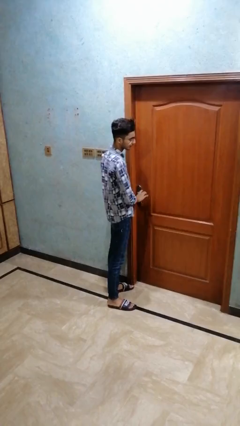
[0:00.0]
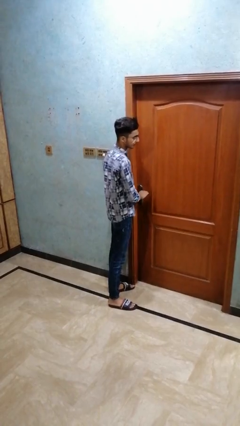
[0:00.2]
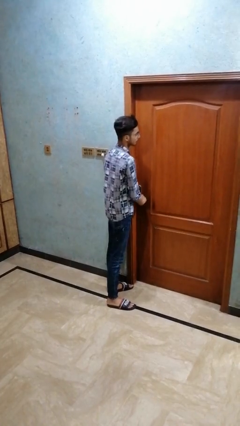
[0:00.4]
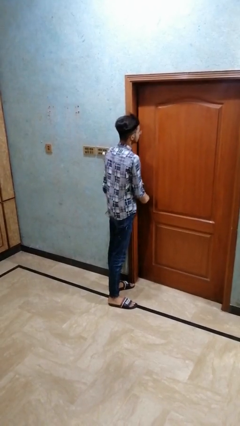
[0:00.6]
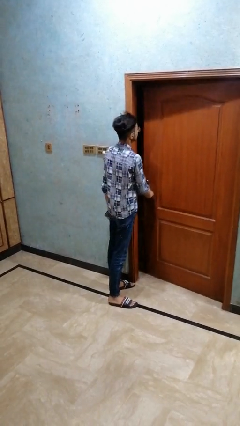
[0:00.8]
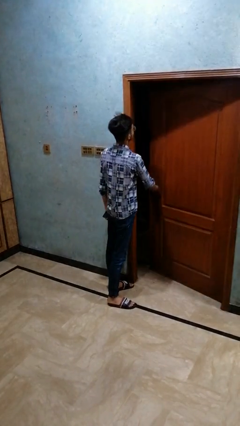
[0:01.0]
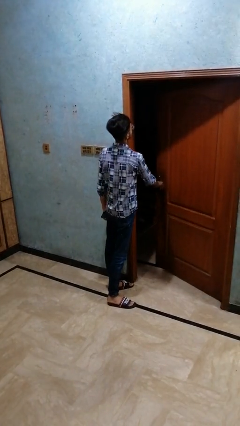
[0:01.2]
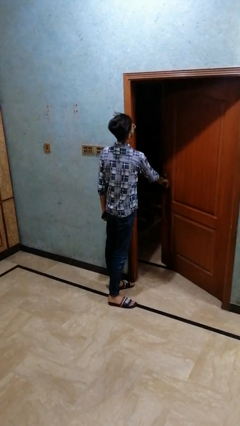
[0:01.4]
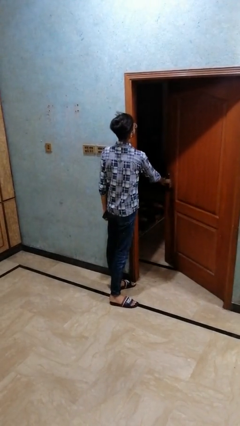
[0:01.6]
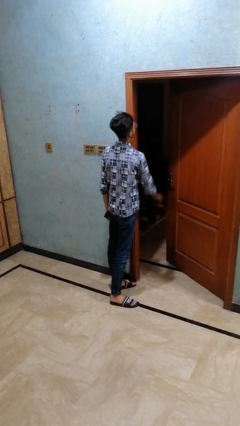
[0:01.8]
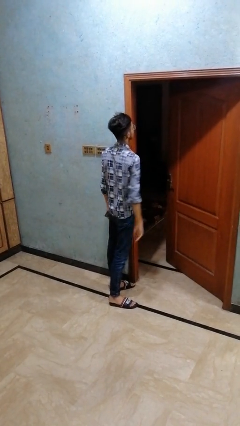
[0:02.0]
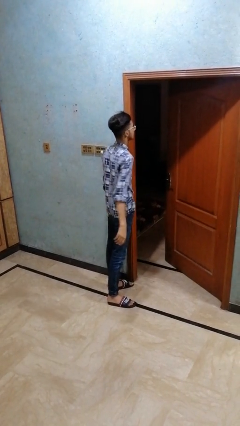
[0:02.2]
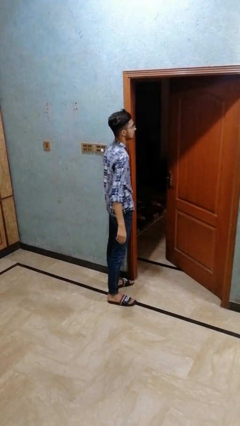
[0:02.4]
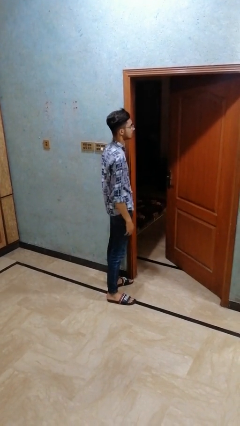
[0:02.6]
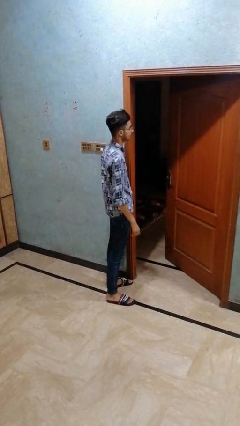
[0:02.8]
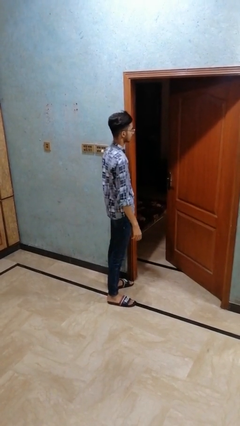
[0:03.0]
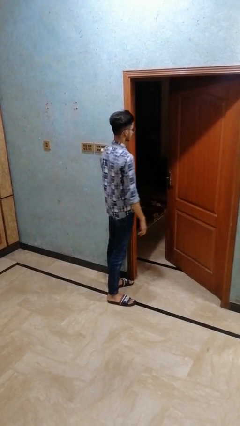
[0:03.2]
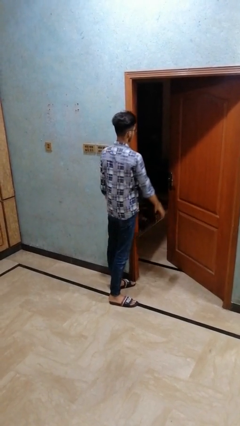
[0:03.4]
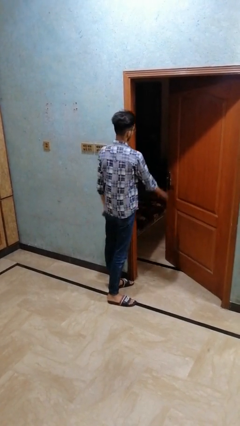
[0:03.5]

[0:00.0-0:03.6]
person opens closet door

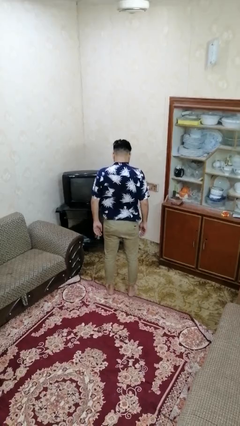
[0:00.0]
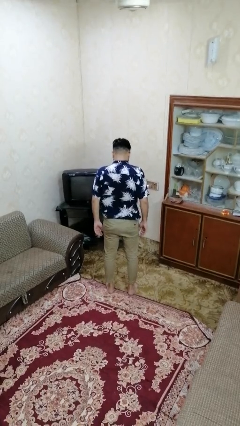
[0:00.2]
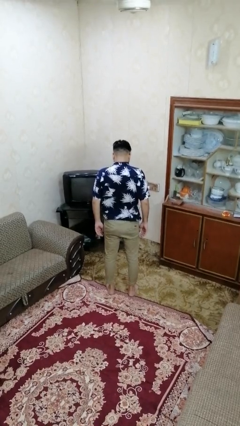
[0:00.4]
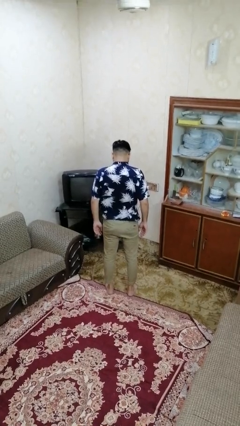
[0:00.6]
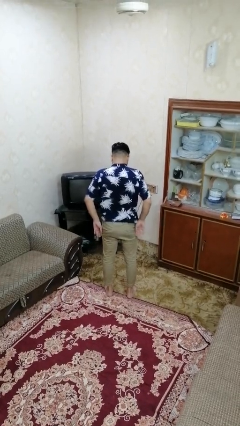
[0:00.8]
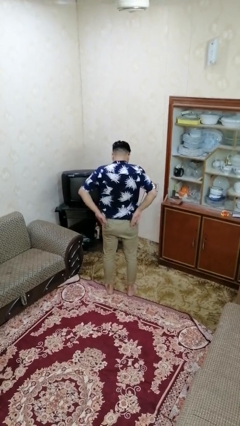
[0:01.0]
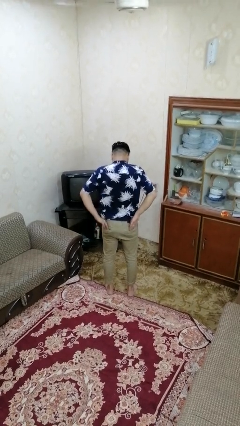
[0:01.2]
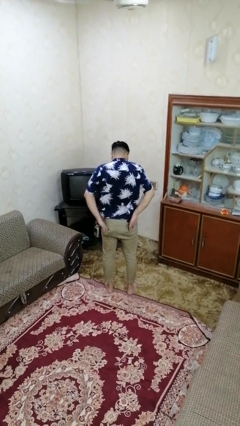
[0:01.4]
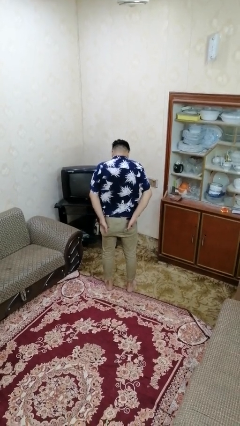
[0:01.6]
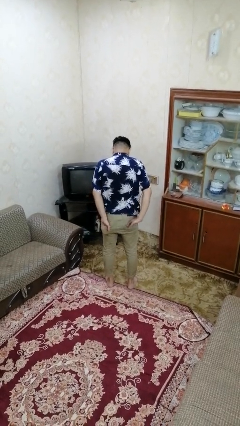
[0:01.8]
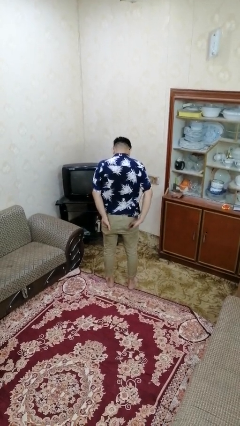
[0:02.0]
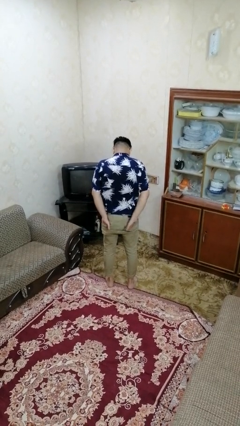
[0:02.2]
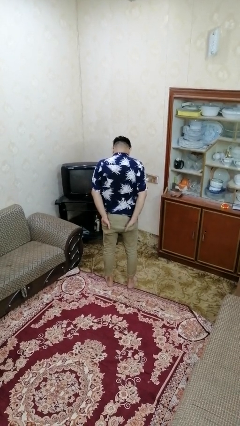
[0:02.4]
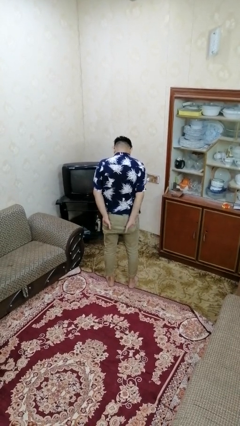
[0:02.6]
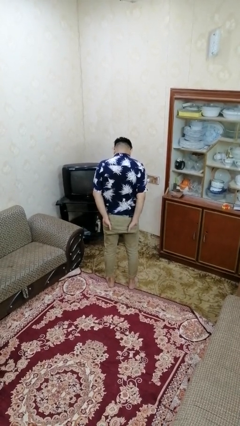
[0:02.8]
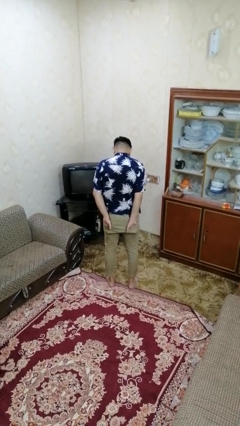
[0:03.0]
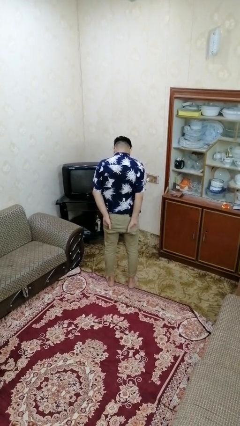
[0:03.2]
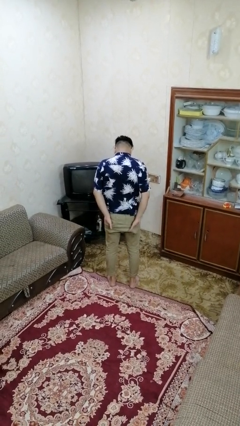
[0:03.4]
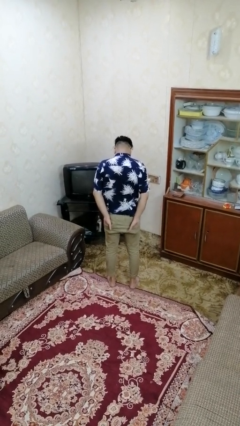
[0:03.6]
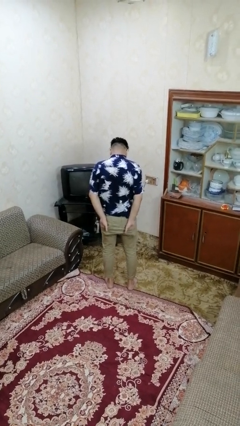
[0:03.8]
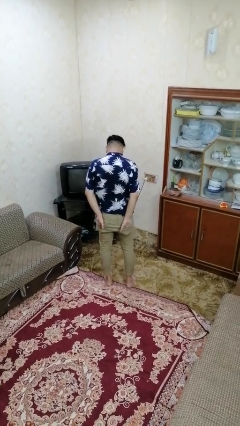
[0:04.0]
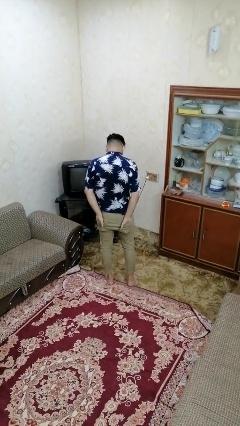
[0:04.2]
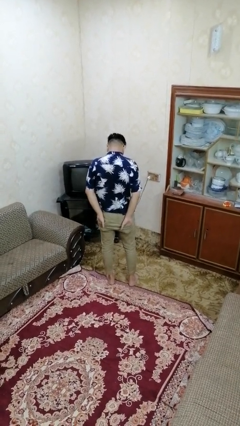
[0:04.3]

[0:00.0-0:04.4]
person puts hands in back pockets

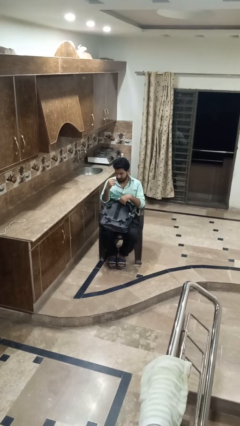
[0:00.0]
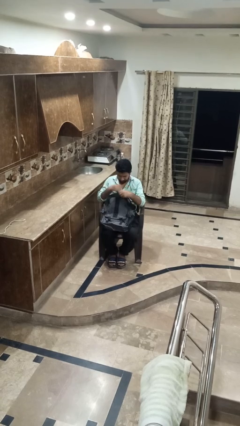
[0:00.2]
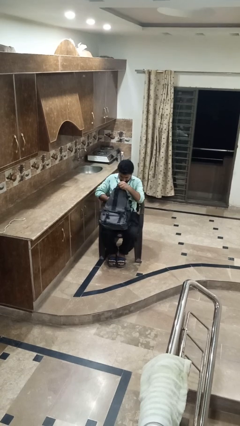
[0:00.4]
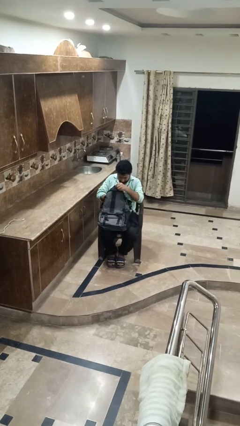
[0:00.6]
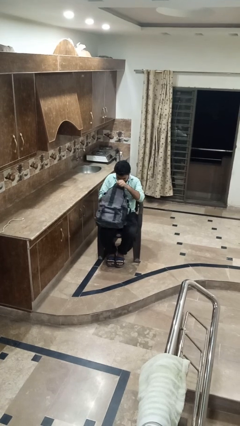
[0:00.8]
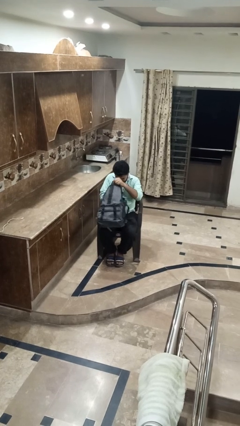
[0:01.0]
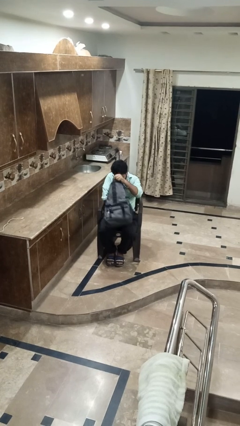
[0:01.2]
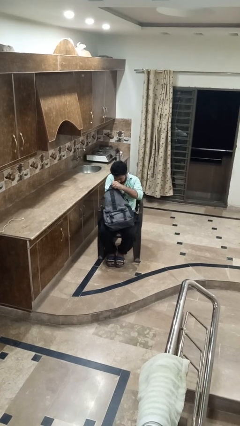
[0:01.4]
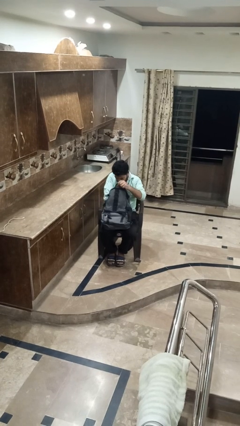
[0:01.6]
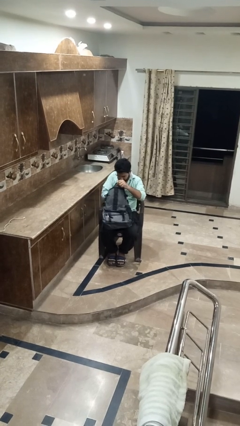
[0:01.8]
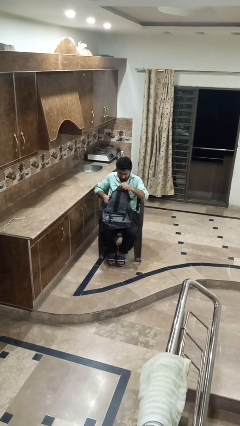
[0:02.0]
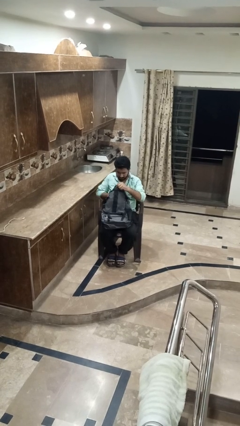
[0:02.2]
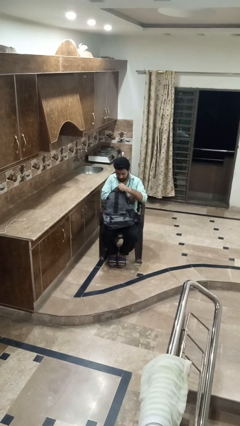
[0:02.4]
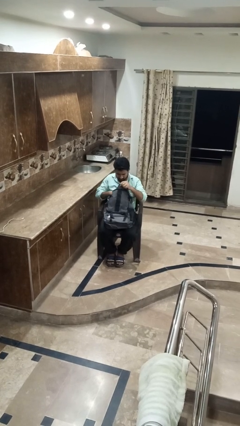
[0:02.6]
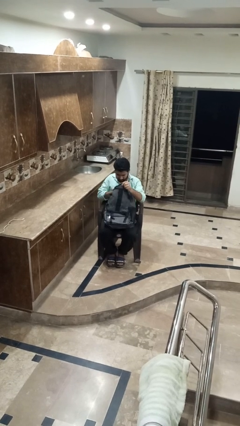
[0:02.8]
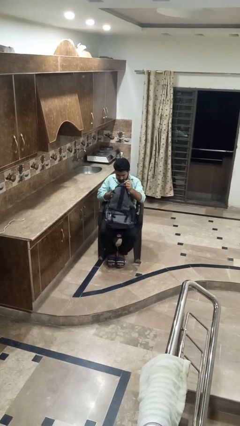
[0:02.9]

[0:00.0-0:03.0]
person searches in bag

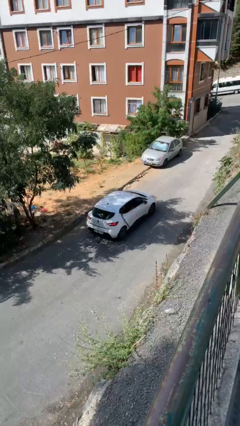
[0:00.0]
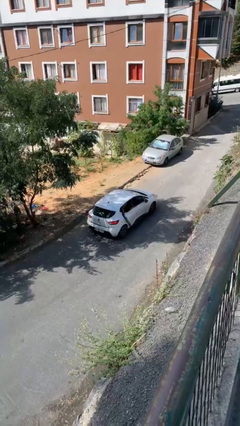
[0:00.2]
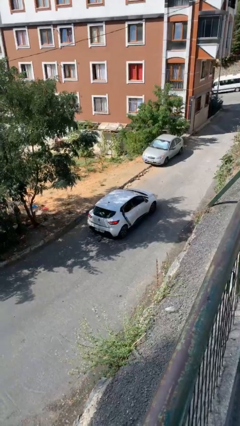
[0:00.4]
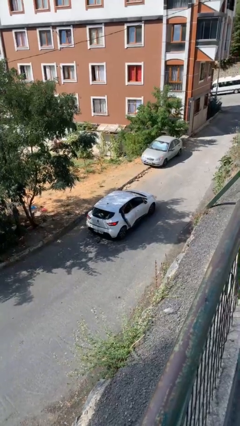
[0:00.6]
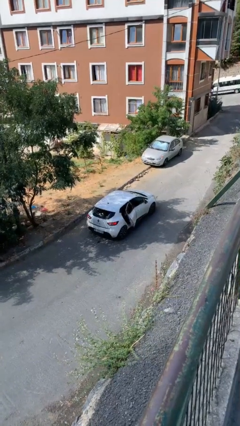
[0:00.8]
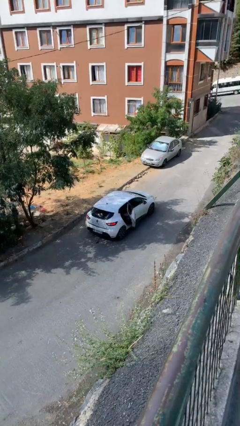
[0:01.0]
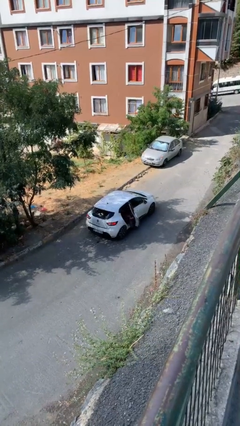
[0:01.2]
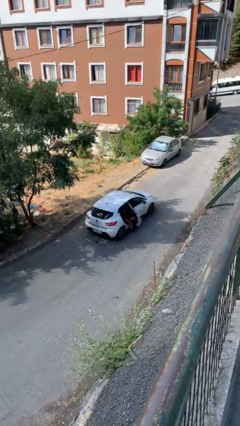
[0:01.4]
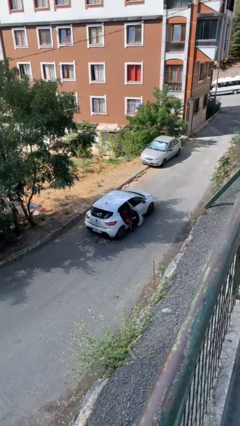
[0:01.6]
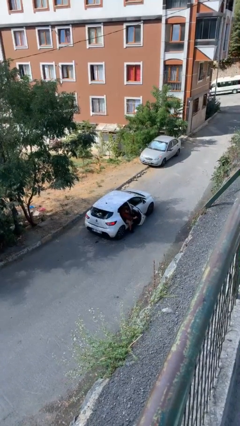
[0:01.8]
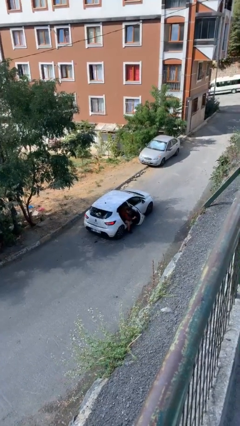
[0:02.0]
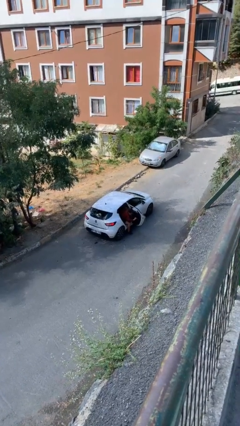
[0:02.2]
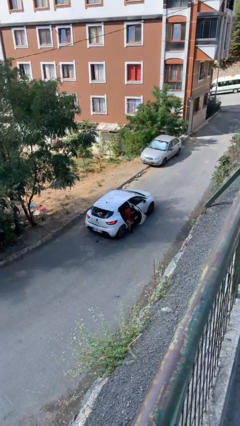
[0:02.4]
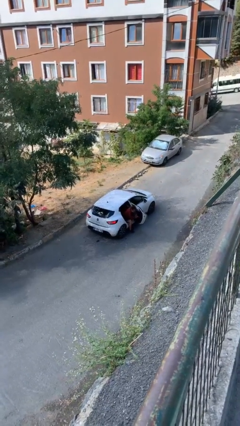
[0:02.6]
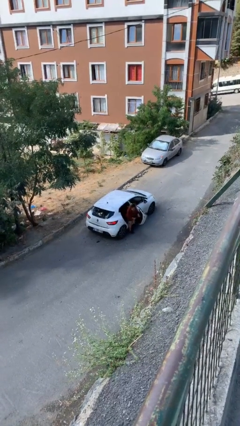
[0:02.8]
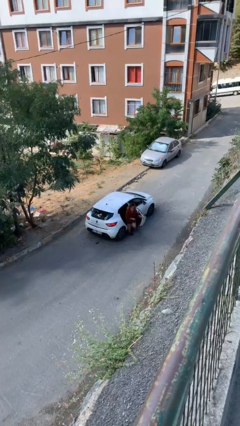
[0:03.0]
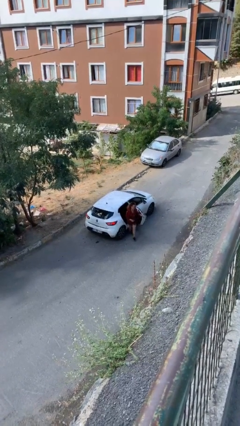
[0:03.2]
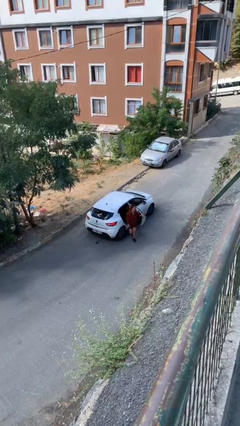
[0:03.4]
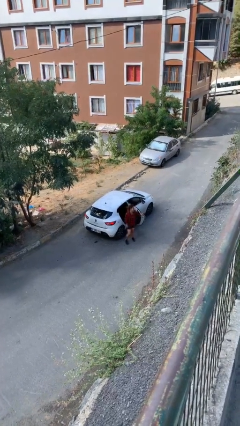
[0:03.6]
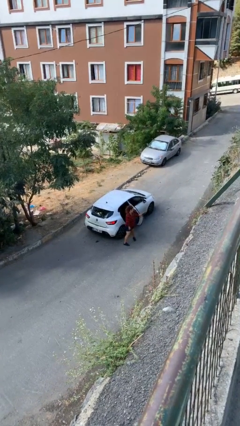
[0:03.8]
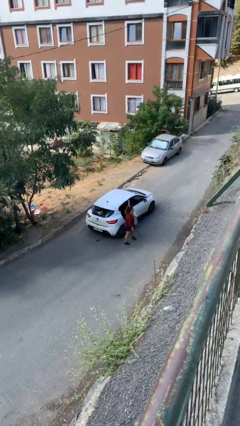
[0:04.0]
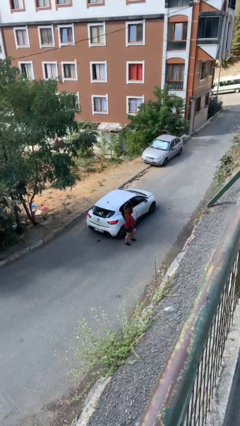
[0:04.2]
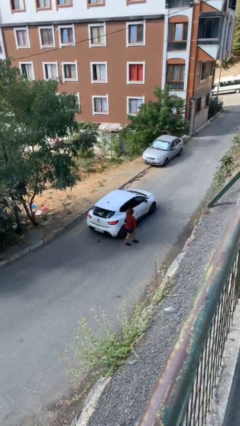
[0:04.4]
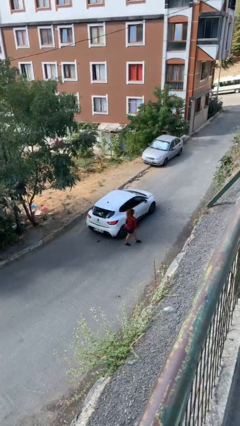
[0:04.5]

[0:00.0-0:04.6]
car drops off person

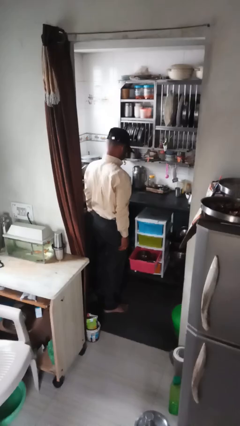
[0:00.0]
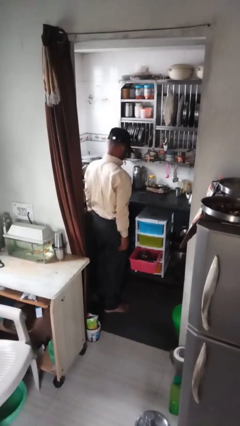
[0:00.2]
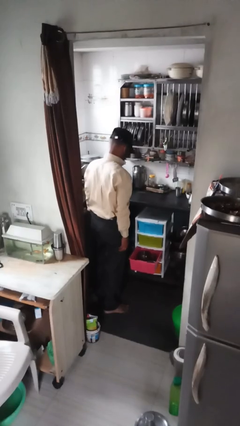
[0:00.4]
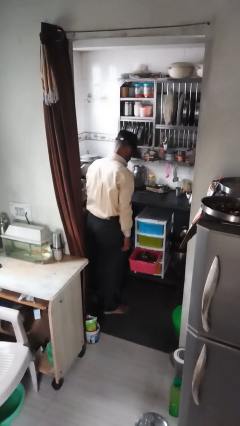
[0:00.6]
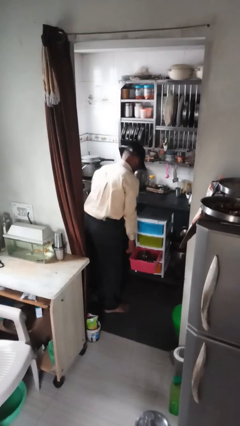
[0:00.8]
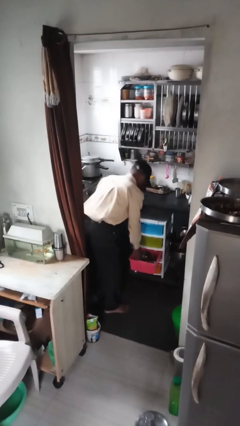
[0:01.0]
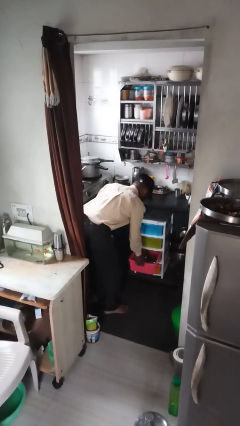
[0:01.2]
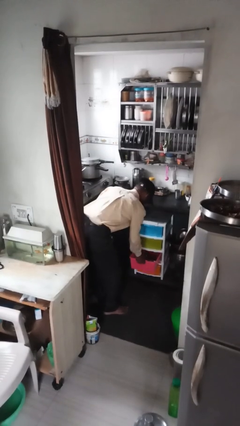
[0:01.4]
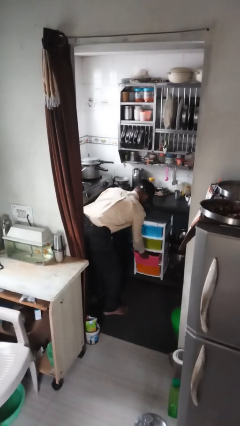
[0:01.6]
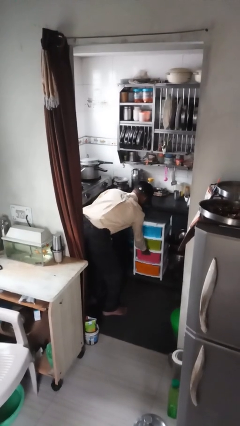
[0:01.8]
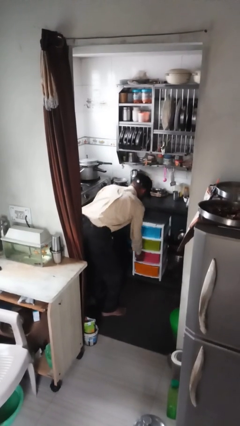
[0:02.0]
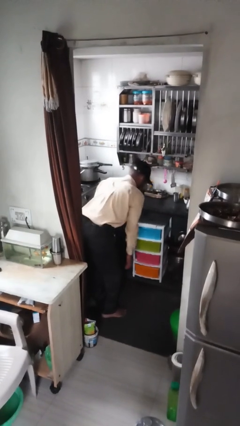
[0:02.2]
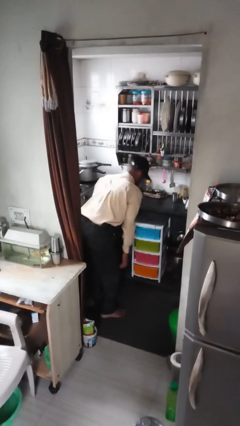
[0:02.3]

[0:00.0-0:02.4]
person closes kitchen drawer
